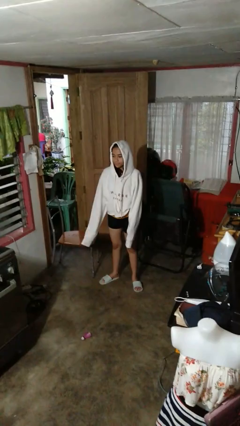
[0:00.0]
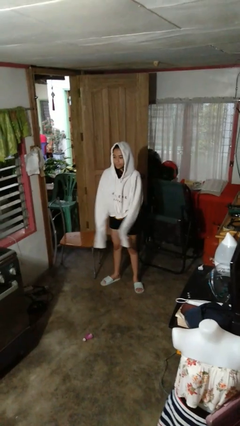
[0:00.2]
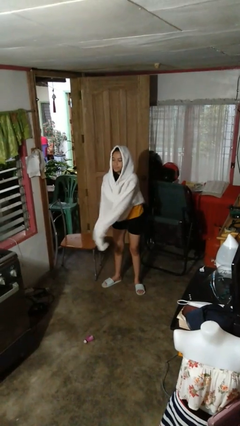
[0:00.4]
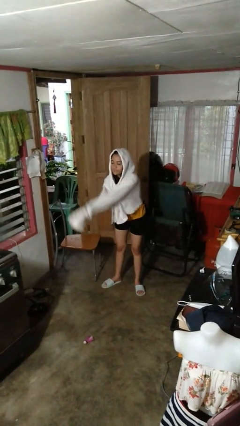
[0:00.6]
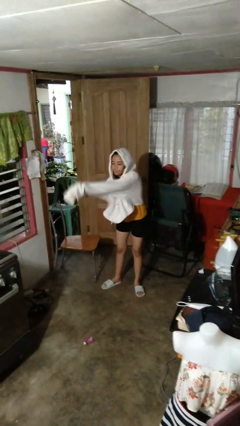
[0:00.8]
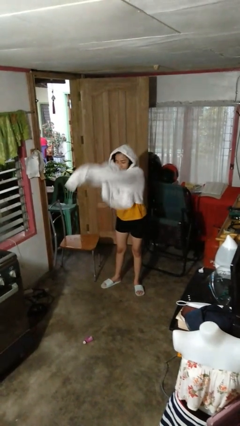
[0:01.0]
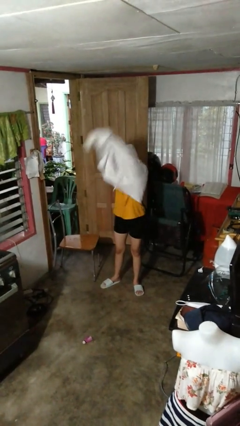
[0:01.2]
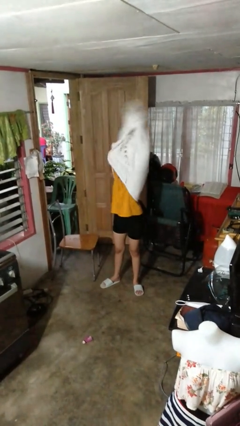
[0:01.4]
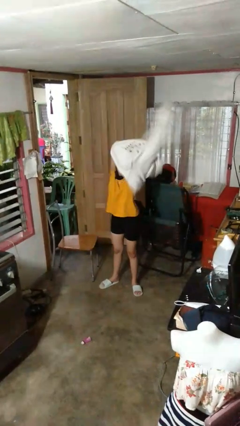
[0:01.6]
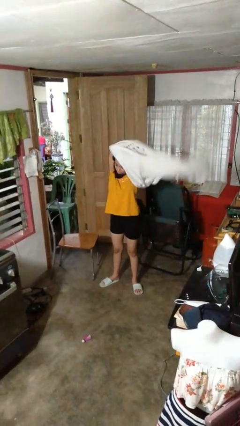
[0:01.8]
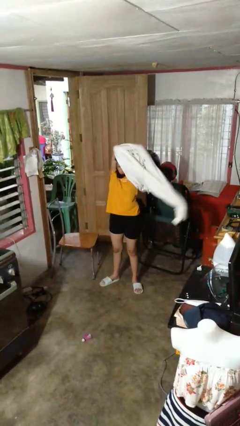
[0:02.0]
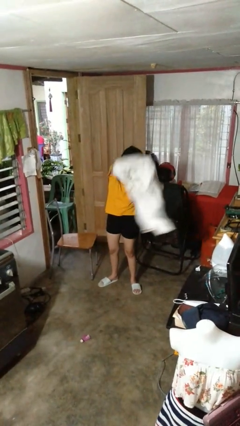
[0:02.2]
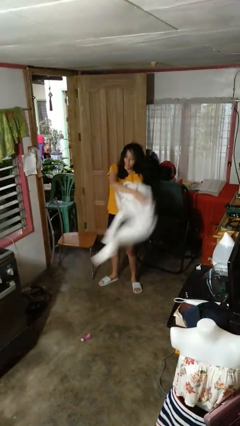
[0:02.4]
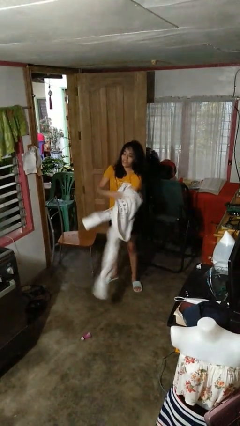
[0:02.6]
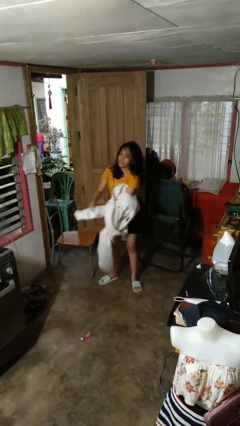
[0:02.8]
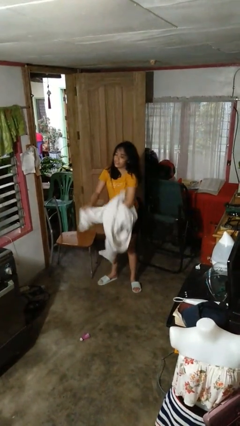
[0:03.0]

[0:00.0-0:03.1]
person takes off hoodie

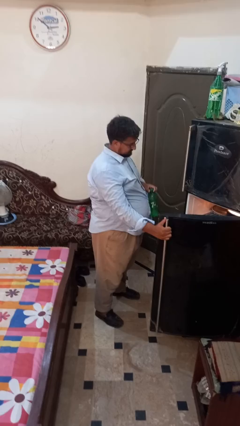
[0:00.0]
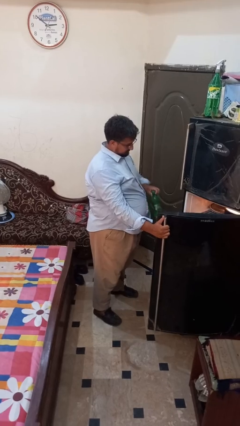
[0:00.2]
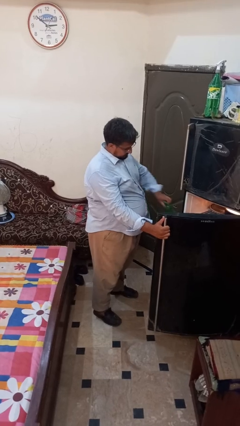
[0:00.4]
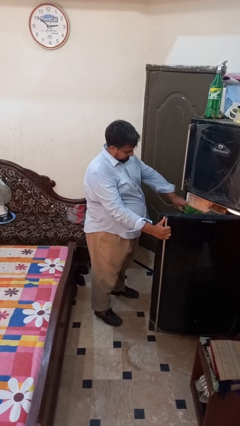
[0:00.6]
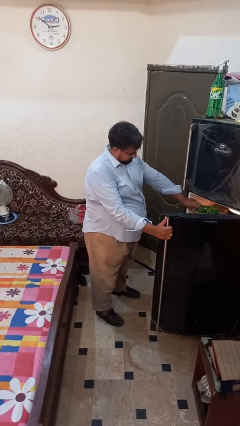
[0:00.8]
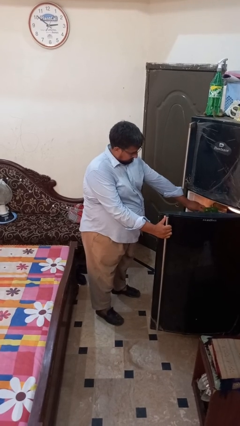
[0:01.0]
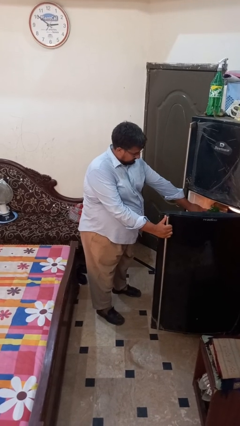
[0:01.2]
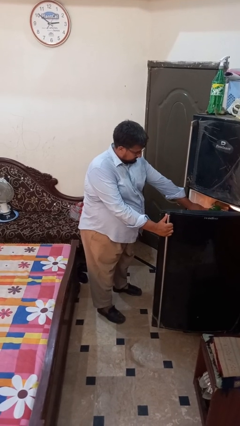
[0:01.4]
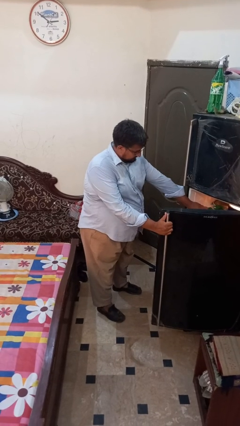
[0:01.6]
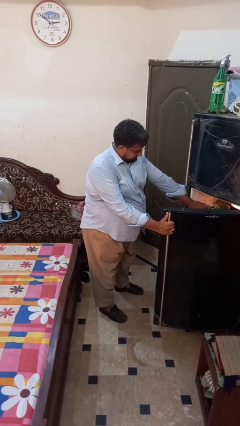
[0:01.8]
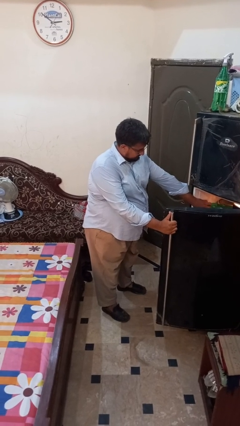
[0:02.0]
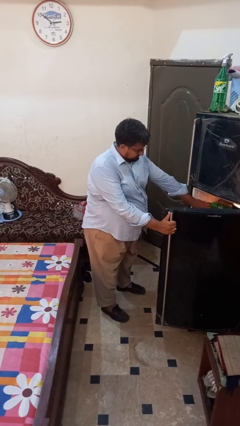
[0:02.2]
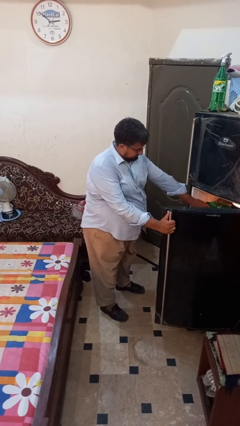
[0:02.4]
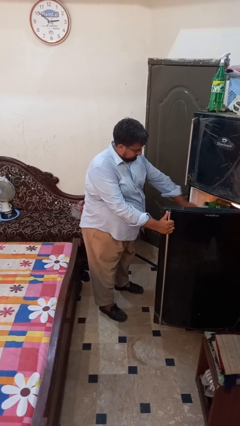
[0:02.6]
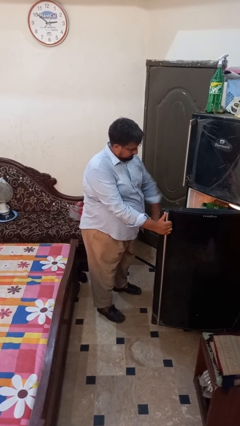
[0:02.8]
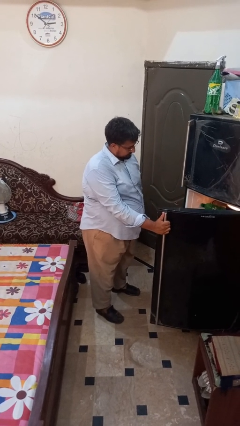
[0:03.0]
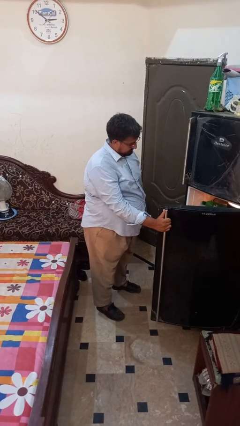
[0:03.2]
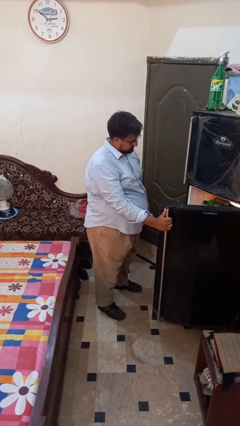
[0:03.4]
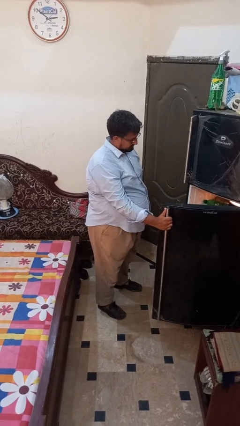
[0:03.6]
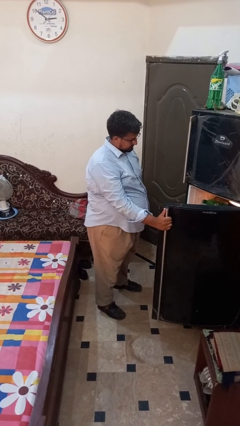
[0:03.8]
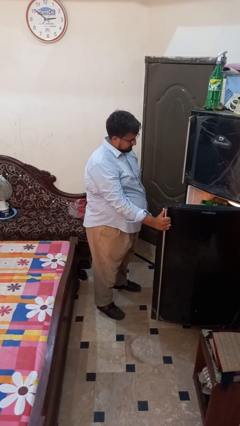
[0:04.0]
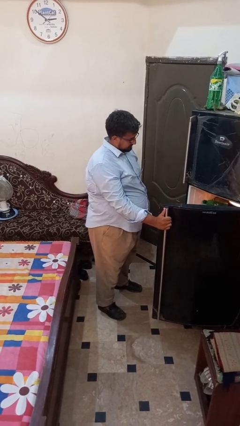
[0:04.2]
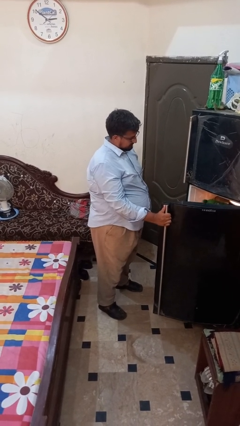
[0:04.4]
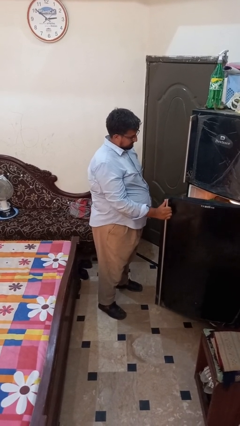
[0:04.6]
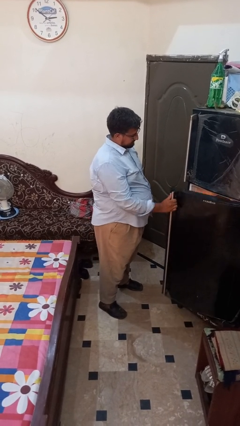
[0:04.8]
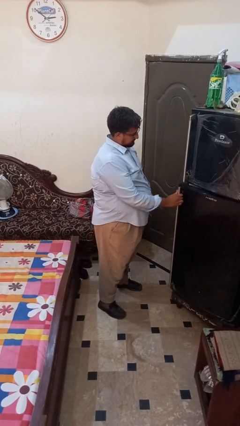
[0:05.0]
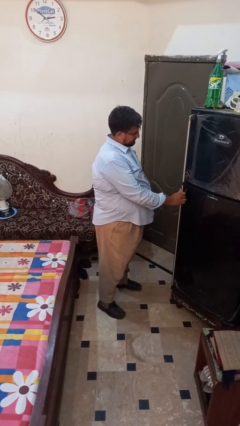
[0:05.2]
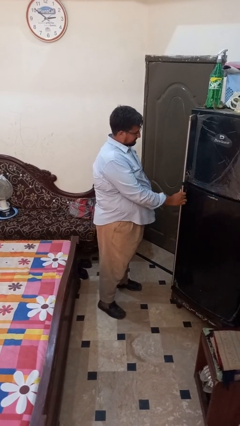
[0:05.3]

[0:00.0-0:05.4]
person puts object into refrigerator

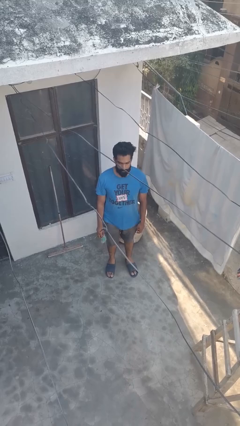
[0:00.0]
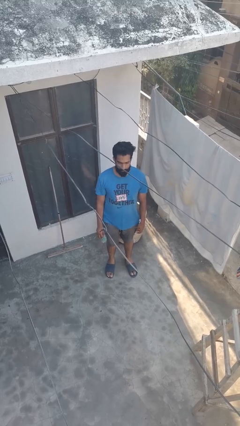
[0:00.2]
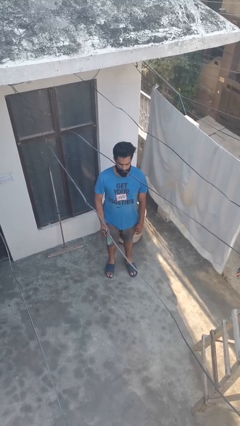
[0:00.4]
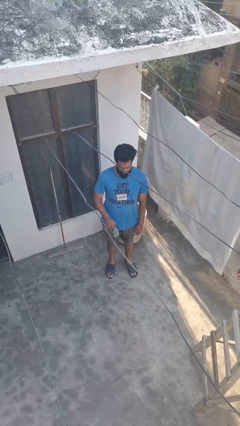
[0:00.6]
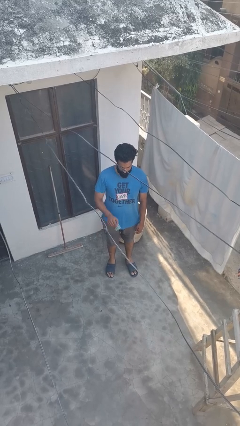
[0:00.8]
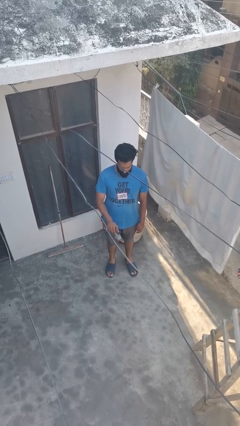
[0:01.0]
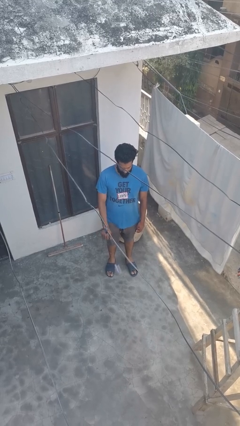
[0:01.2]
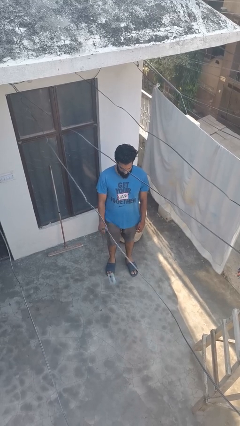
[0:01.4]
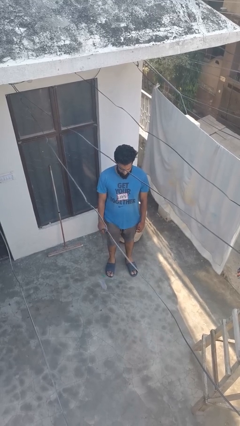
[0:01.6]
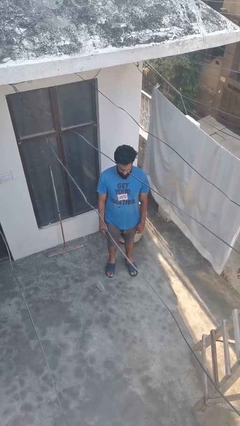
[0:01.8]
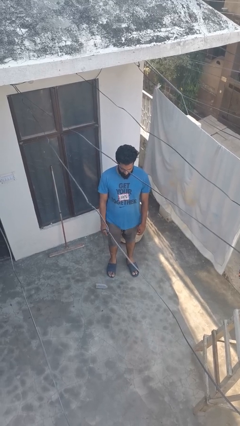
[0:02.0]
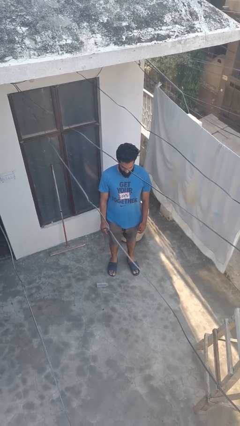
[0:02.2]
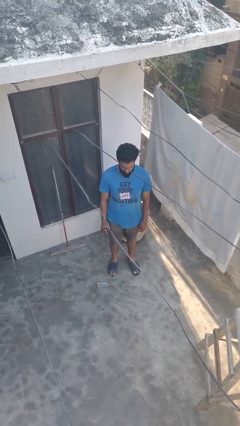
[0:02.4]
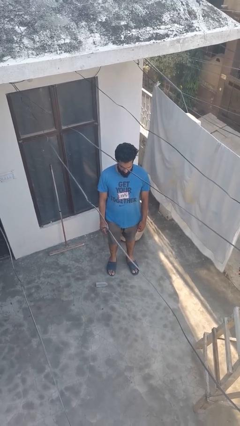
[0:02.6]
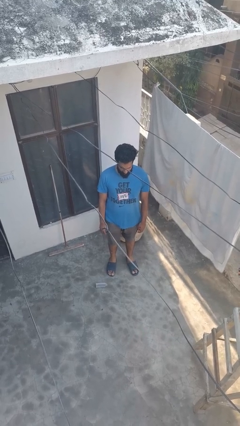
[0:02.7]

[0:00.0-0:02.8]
person throws object into air

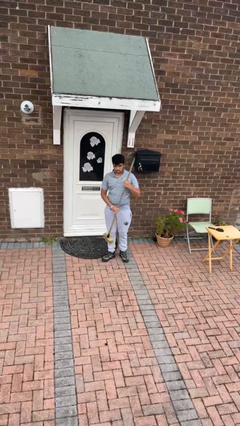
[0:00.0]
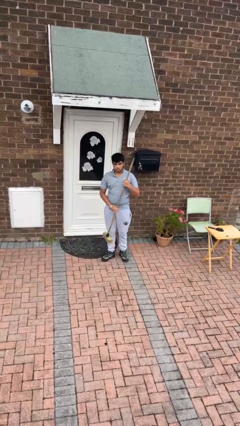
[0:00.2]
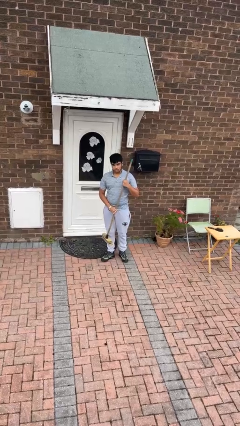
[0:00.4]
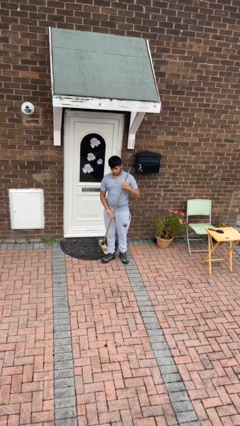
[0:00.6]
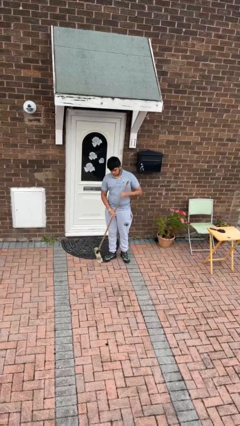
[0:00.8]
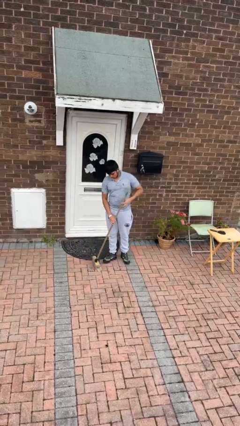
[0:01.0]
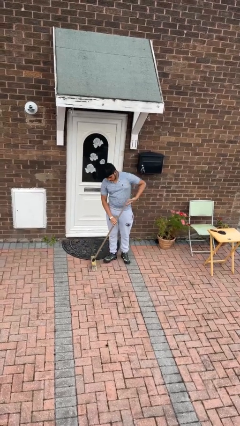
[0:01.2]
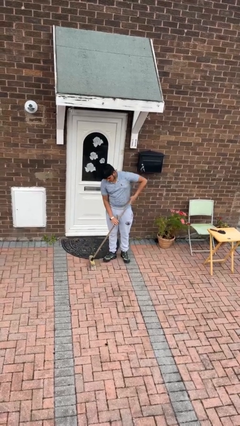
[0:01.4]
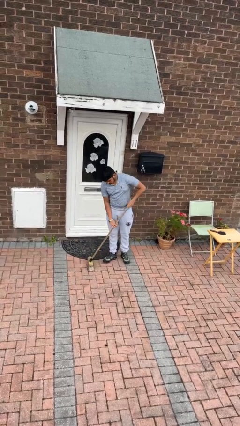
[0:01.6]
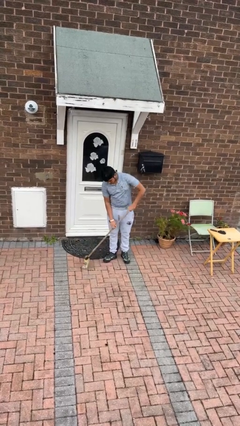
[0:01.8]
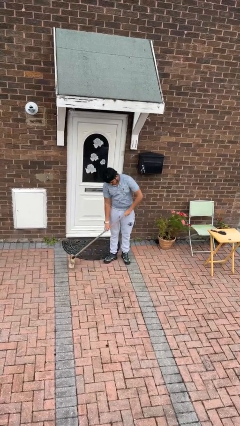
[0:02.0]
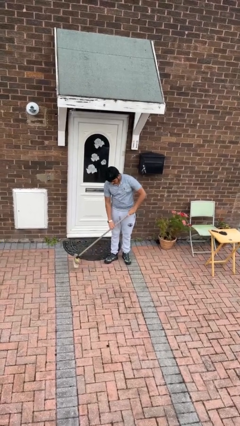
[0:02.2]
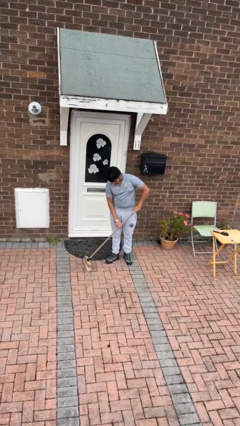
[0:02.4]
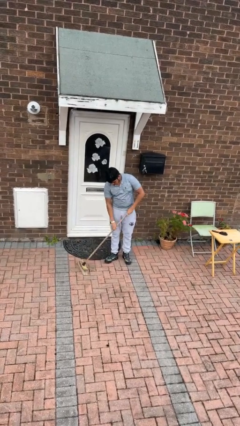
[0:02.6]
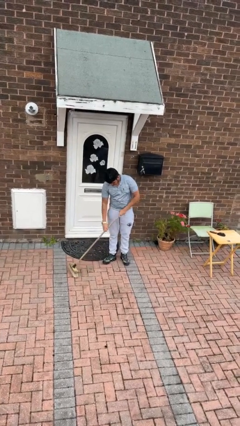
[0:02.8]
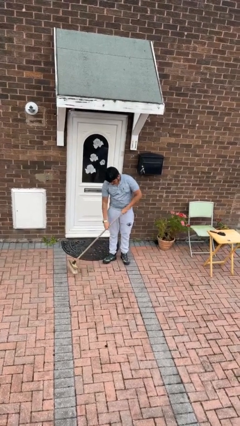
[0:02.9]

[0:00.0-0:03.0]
person sweeps floor

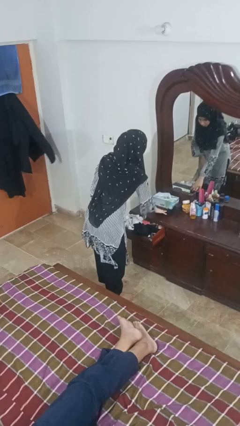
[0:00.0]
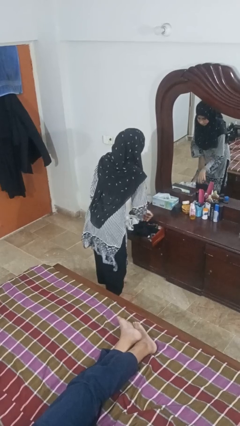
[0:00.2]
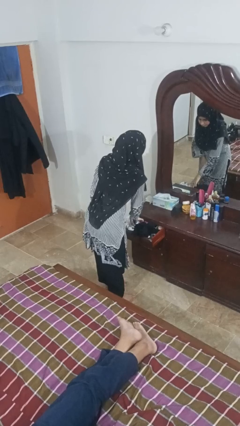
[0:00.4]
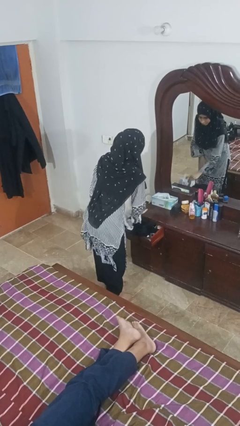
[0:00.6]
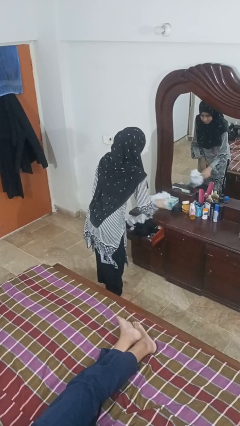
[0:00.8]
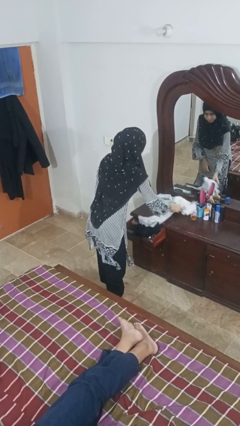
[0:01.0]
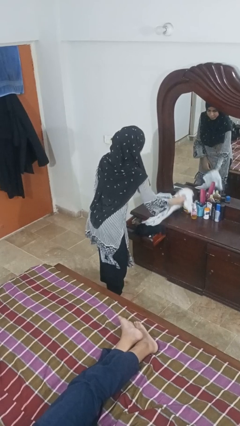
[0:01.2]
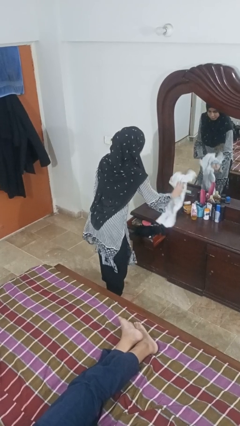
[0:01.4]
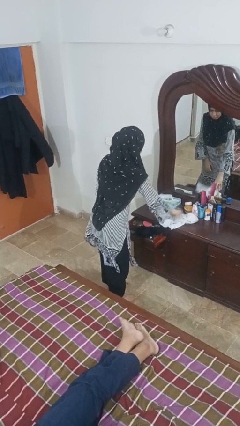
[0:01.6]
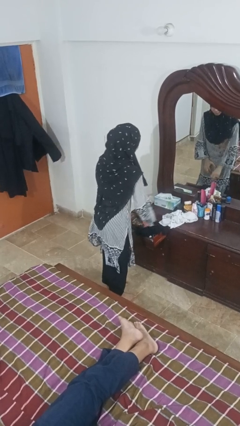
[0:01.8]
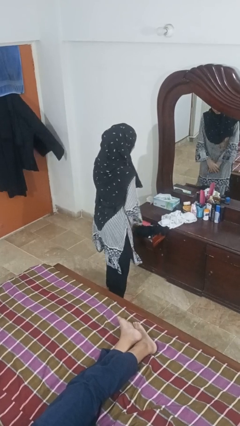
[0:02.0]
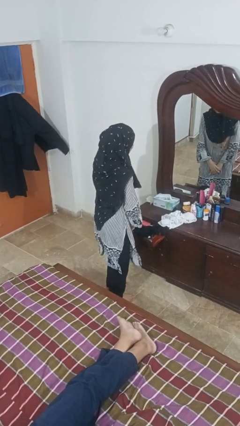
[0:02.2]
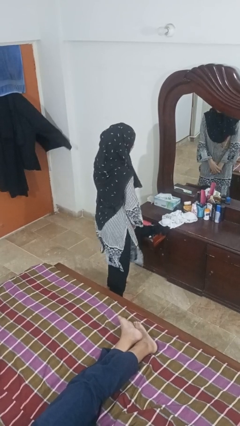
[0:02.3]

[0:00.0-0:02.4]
person takes clothes from dresser

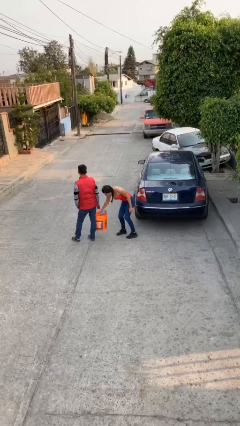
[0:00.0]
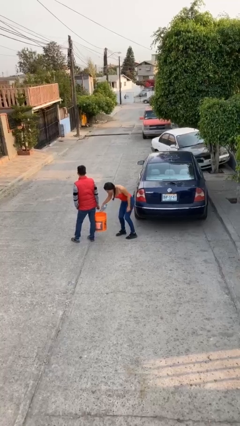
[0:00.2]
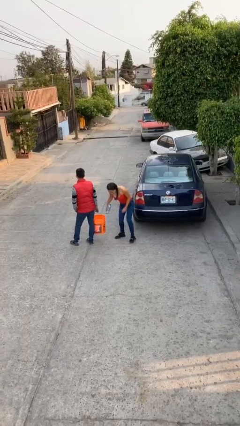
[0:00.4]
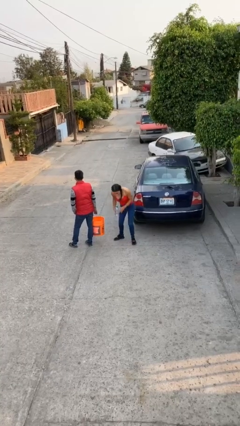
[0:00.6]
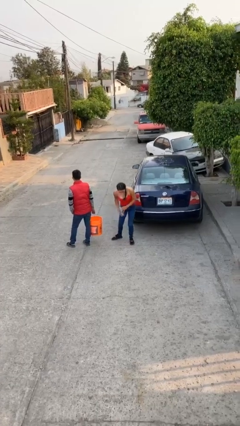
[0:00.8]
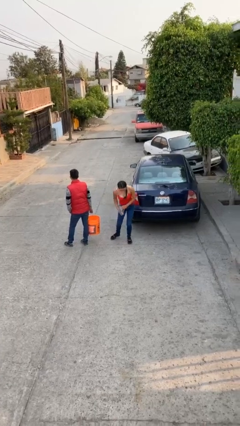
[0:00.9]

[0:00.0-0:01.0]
person steals object from person
